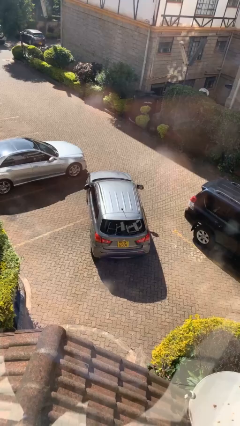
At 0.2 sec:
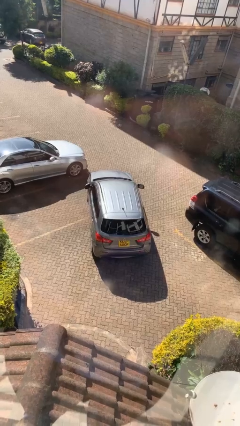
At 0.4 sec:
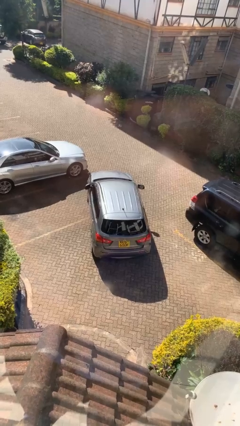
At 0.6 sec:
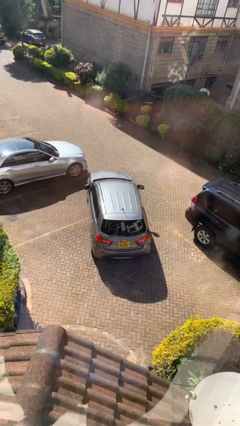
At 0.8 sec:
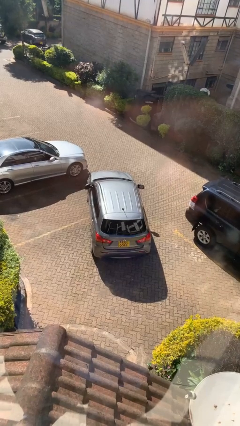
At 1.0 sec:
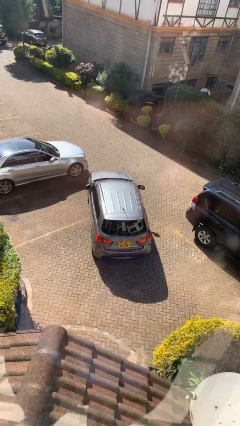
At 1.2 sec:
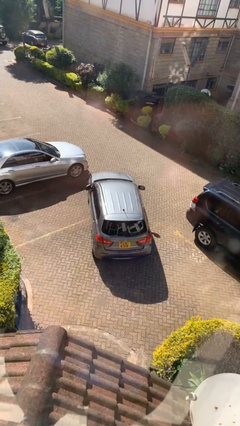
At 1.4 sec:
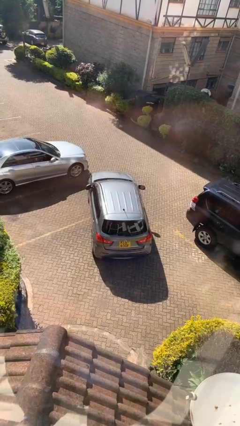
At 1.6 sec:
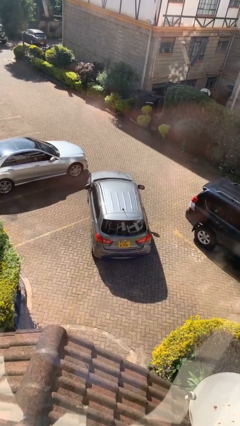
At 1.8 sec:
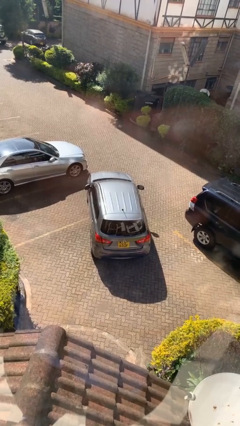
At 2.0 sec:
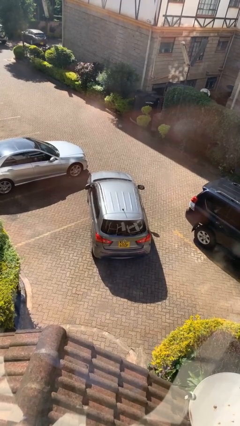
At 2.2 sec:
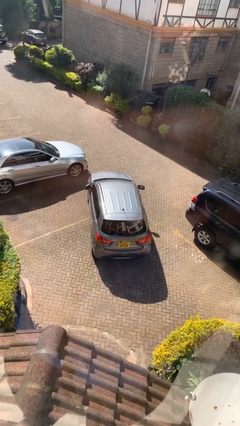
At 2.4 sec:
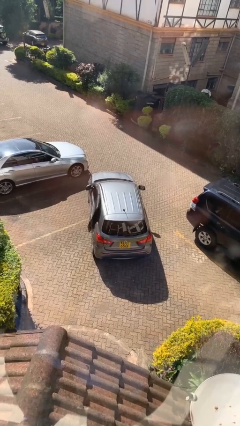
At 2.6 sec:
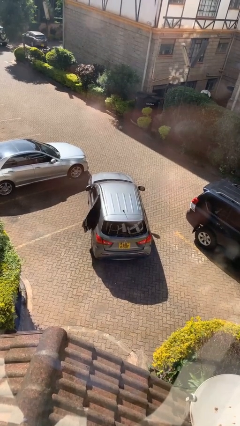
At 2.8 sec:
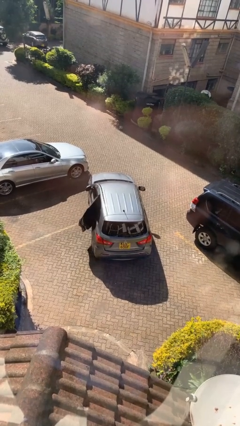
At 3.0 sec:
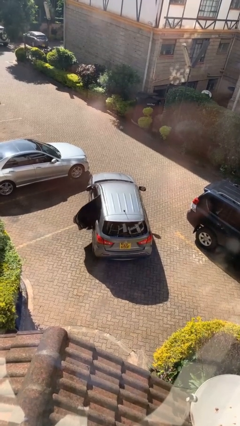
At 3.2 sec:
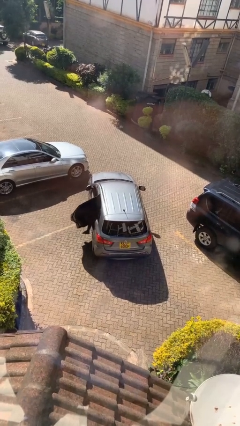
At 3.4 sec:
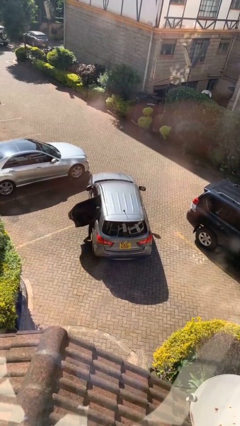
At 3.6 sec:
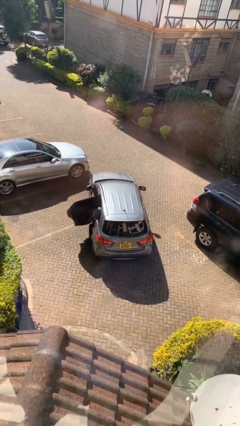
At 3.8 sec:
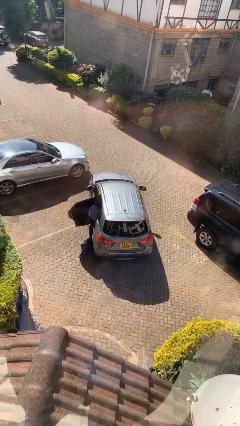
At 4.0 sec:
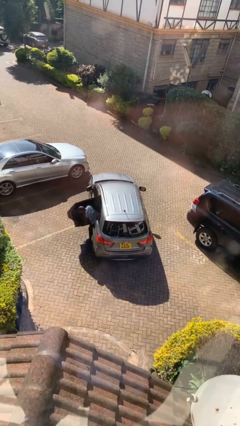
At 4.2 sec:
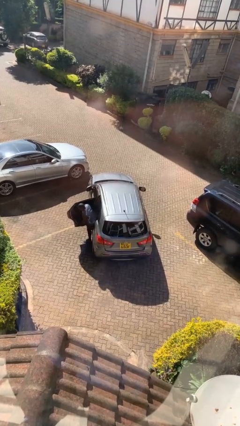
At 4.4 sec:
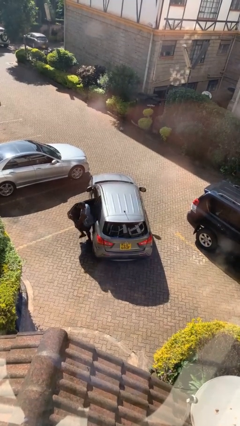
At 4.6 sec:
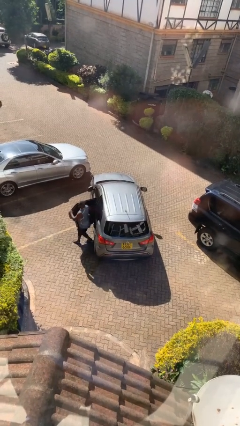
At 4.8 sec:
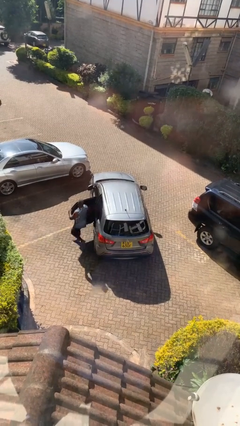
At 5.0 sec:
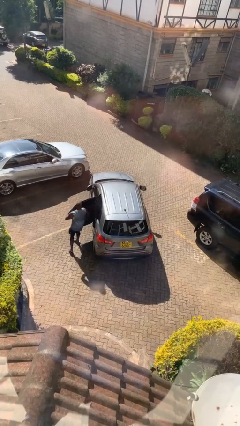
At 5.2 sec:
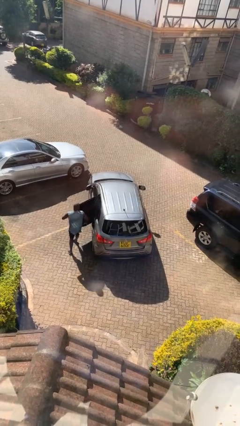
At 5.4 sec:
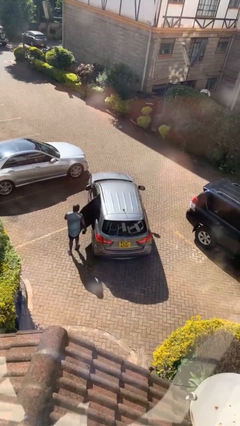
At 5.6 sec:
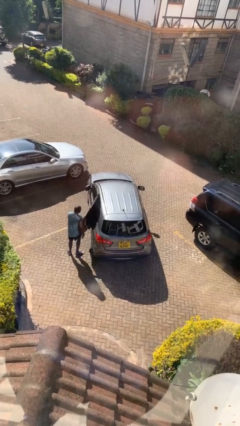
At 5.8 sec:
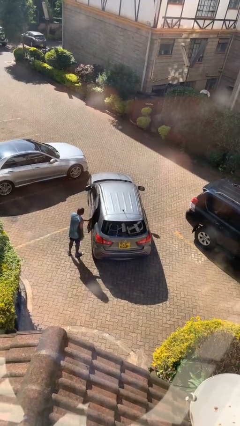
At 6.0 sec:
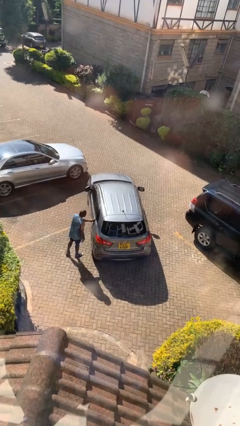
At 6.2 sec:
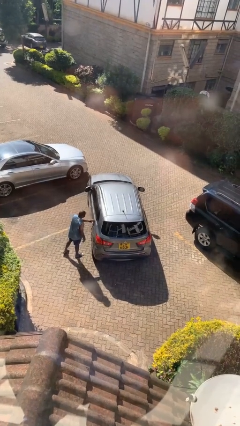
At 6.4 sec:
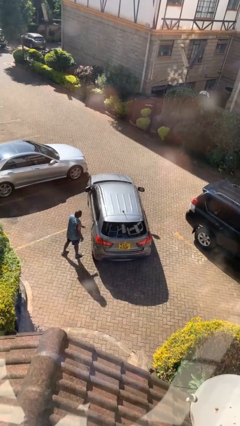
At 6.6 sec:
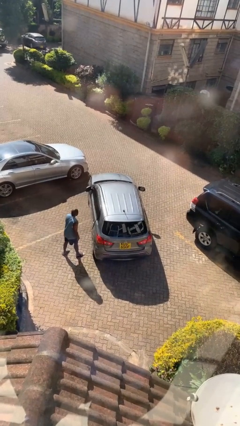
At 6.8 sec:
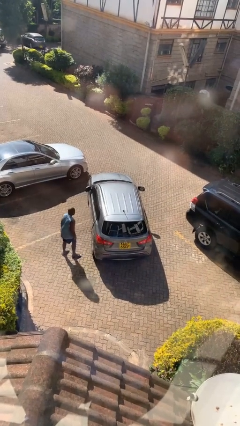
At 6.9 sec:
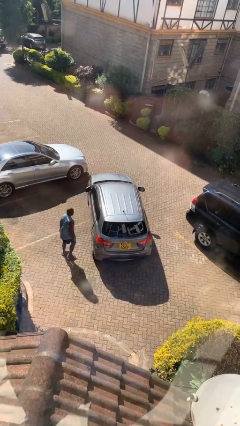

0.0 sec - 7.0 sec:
car drops off person

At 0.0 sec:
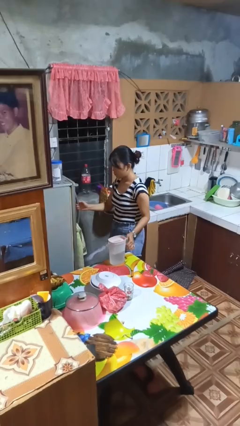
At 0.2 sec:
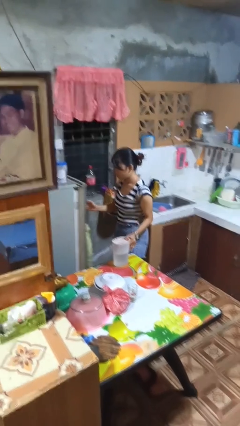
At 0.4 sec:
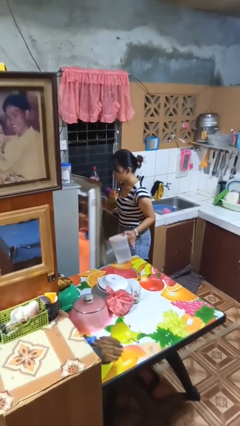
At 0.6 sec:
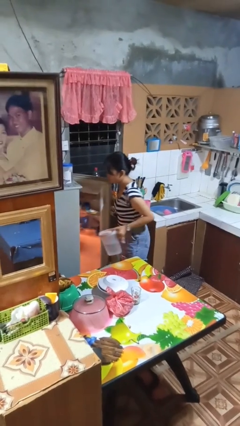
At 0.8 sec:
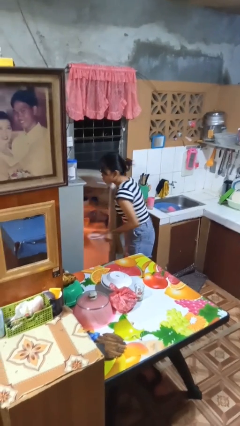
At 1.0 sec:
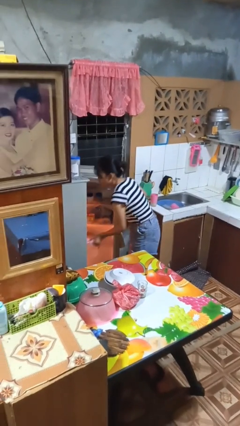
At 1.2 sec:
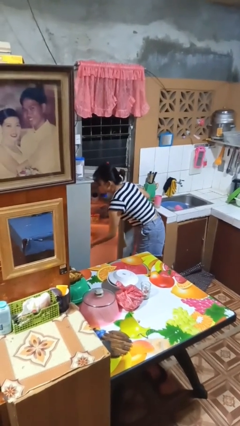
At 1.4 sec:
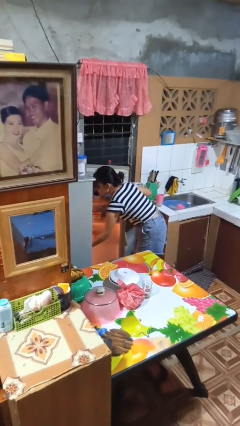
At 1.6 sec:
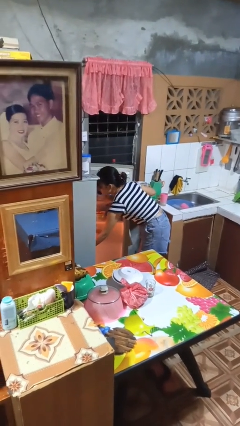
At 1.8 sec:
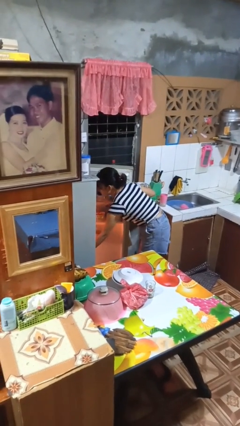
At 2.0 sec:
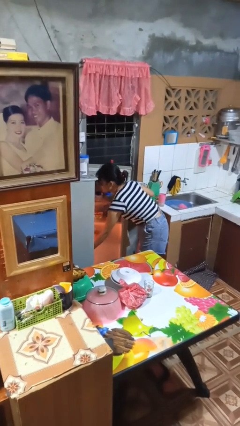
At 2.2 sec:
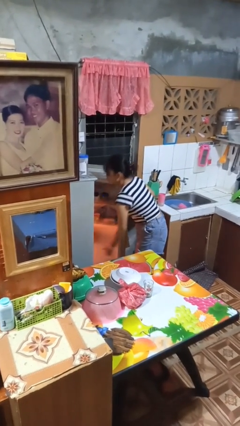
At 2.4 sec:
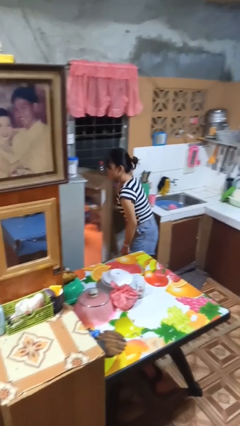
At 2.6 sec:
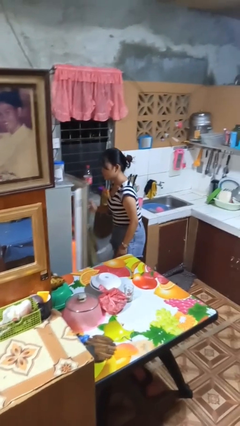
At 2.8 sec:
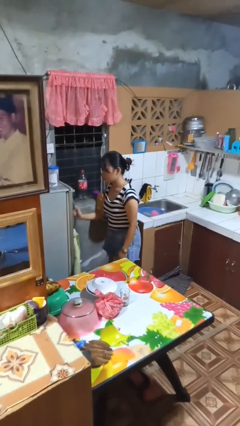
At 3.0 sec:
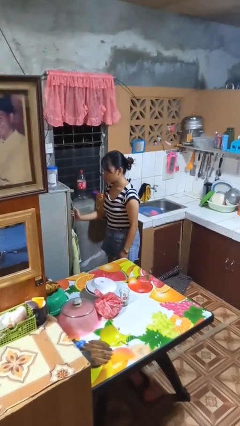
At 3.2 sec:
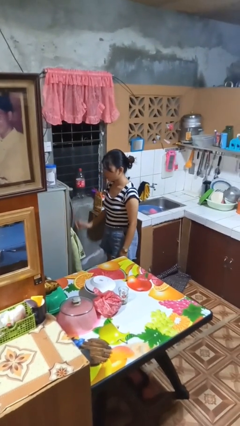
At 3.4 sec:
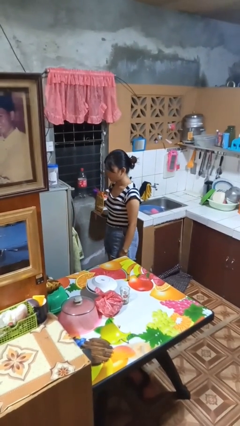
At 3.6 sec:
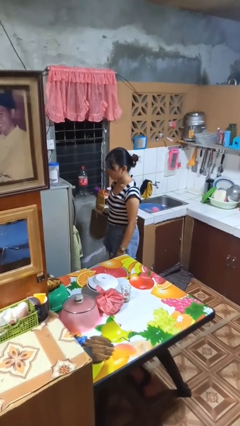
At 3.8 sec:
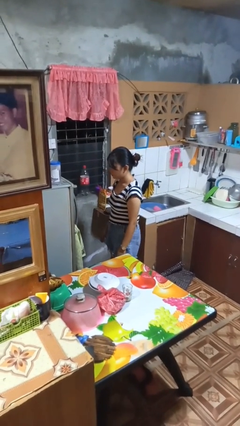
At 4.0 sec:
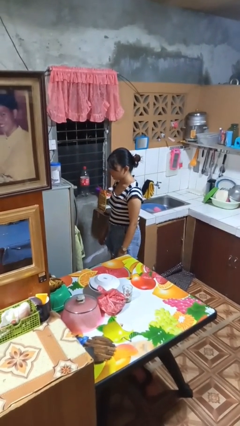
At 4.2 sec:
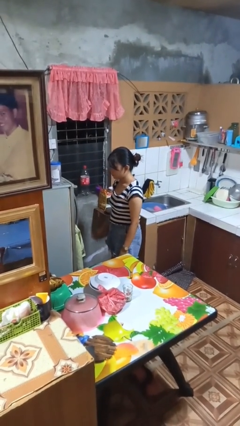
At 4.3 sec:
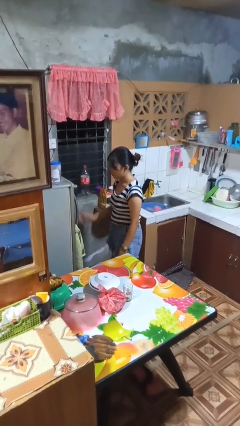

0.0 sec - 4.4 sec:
person puts object into refrigerator

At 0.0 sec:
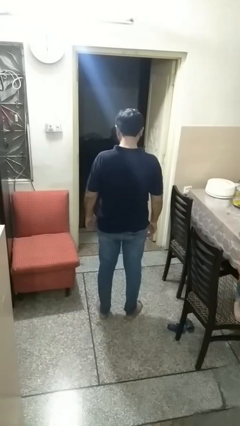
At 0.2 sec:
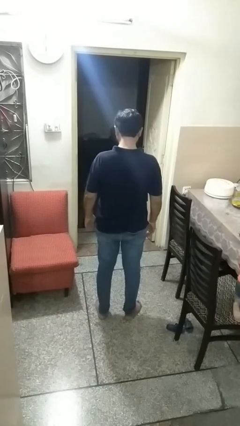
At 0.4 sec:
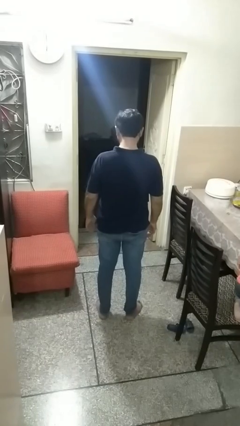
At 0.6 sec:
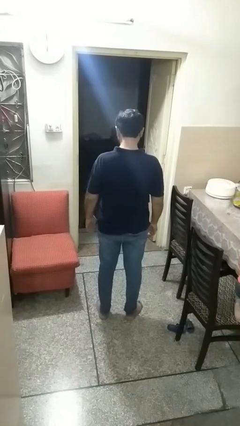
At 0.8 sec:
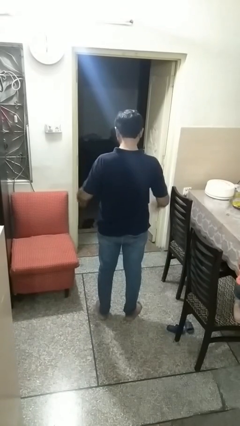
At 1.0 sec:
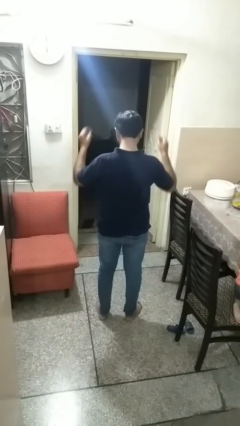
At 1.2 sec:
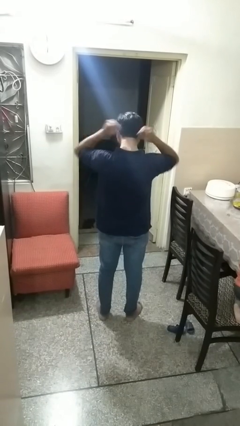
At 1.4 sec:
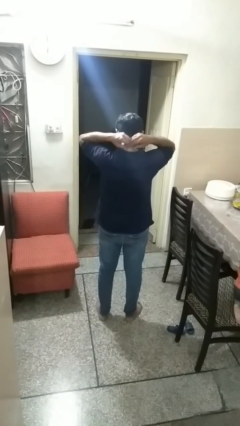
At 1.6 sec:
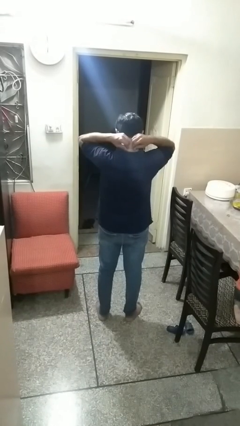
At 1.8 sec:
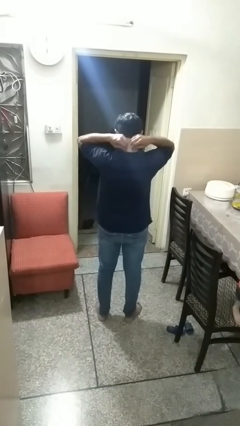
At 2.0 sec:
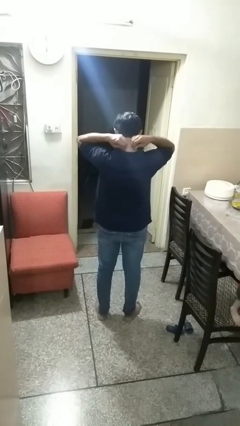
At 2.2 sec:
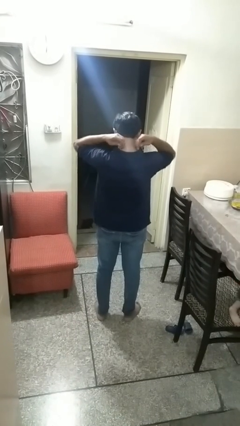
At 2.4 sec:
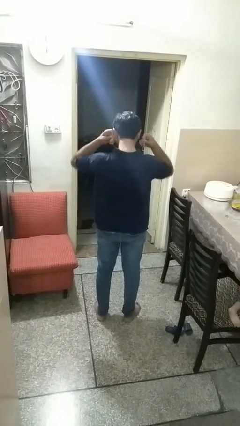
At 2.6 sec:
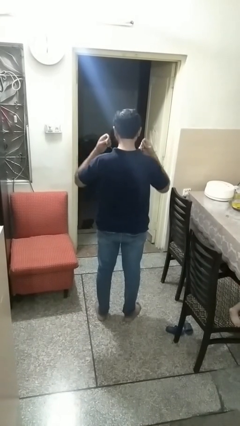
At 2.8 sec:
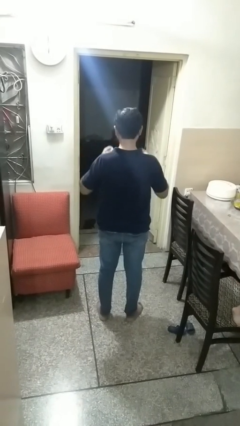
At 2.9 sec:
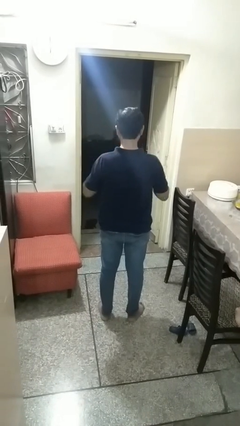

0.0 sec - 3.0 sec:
person takes off necklace

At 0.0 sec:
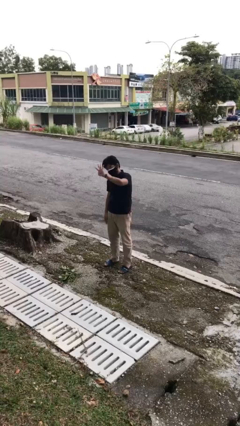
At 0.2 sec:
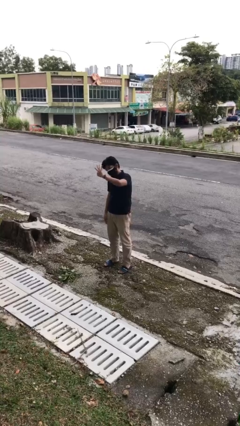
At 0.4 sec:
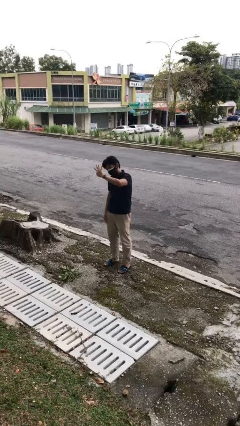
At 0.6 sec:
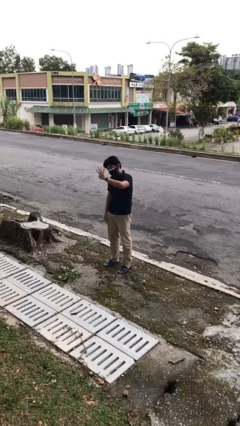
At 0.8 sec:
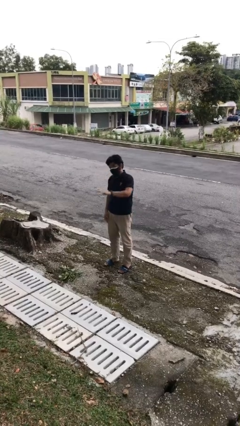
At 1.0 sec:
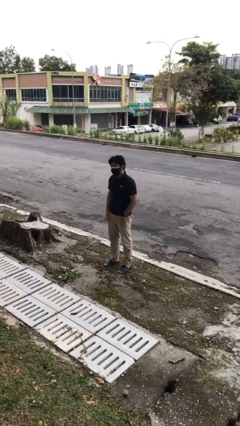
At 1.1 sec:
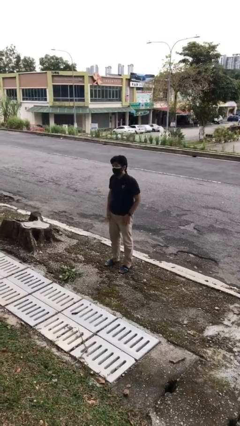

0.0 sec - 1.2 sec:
person gestures number four

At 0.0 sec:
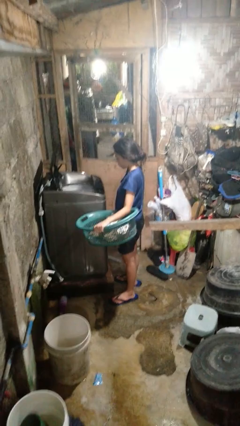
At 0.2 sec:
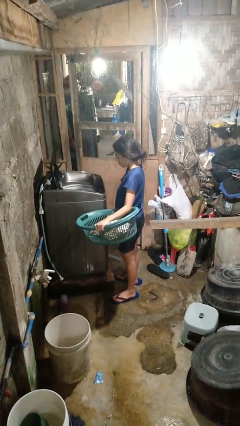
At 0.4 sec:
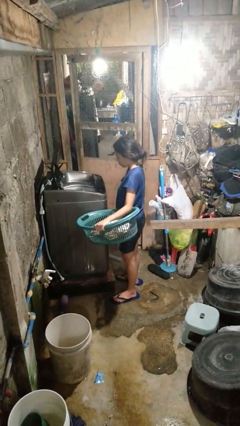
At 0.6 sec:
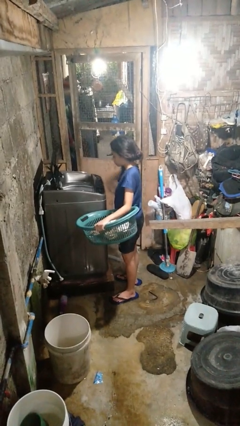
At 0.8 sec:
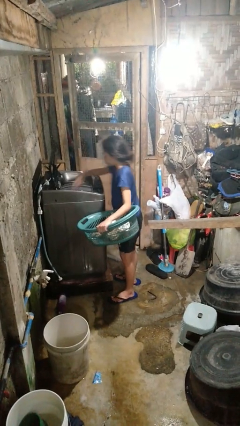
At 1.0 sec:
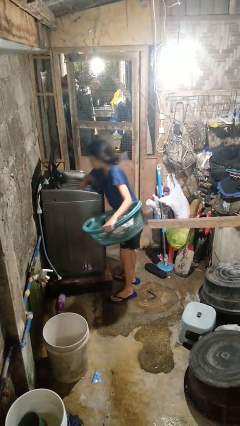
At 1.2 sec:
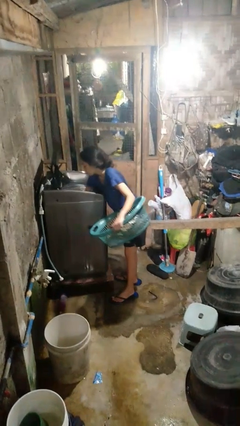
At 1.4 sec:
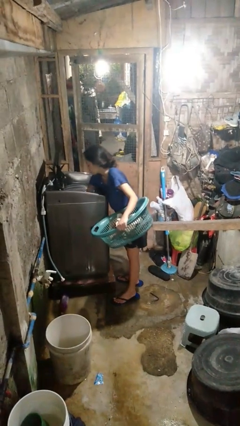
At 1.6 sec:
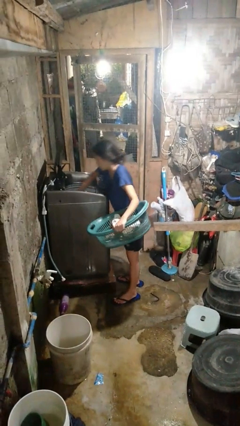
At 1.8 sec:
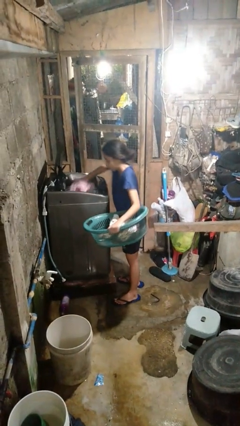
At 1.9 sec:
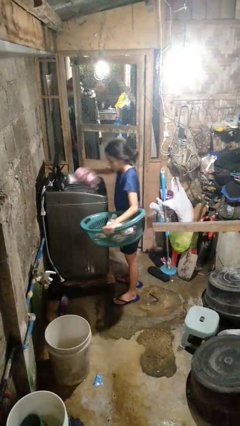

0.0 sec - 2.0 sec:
person unloads clotheswasher
